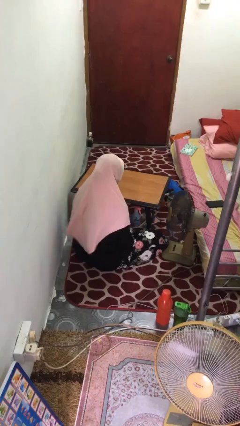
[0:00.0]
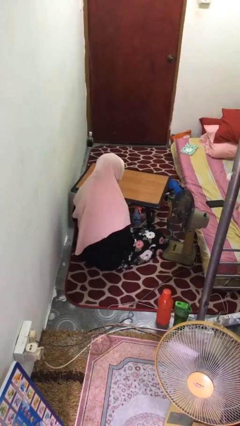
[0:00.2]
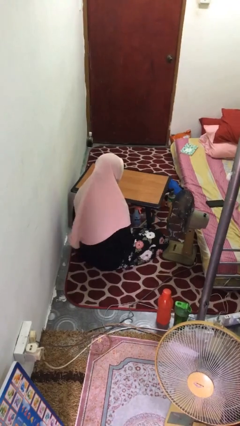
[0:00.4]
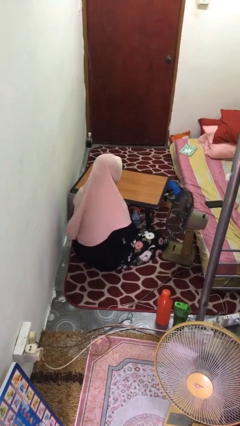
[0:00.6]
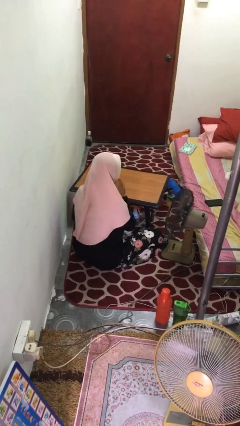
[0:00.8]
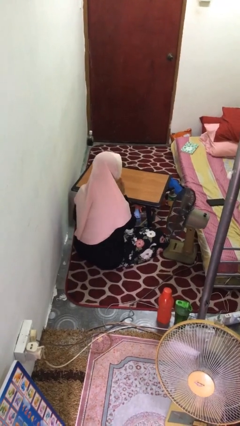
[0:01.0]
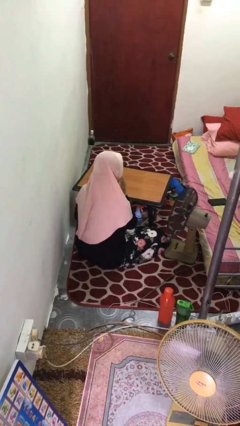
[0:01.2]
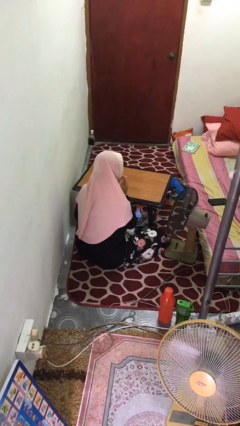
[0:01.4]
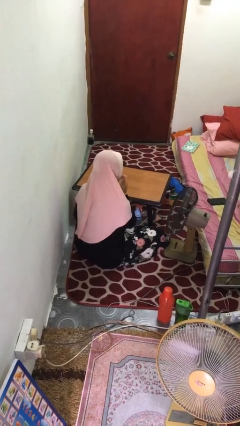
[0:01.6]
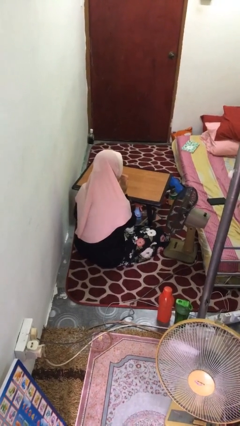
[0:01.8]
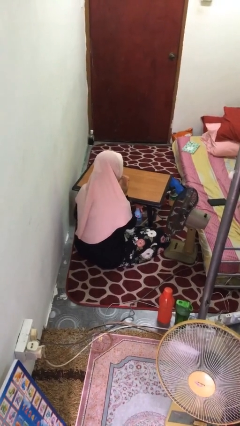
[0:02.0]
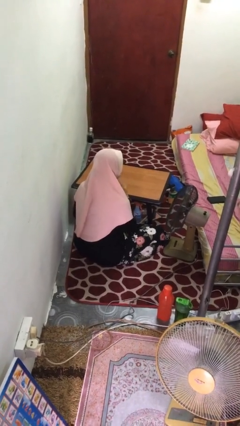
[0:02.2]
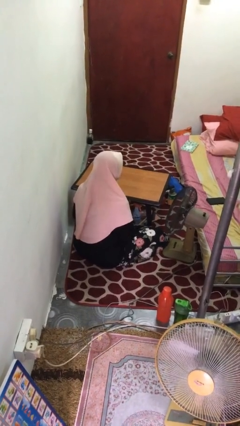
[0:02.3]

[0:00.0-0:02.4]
person licks fingers

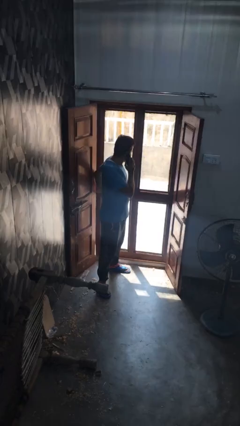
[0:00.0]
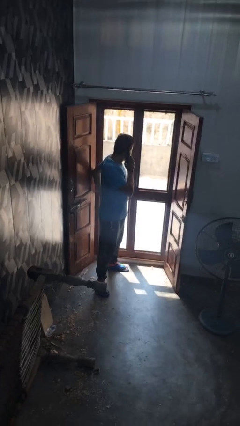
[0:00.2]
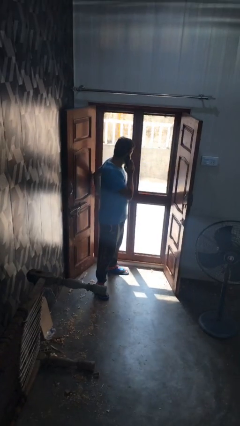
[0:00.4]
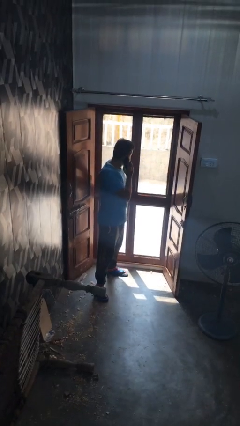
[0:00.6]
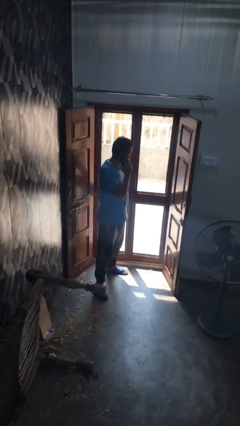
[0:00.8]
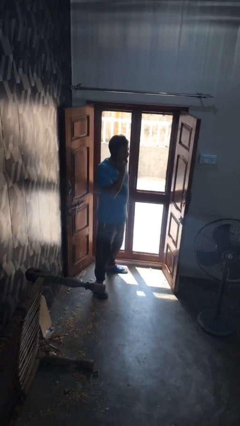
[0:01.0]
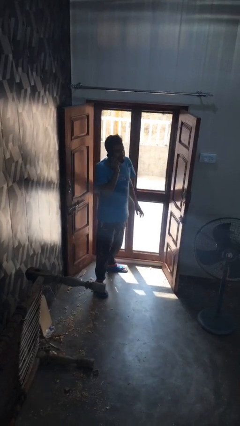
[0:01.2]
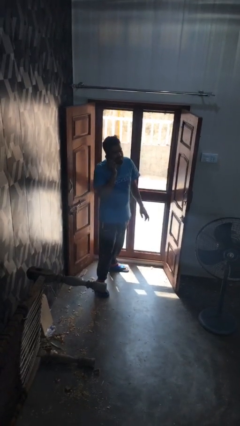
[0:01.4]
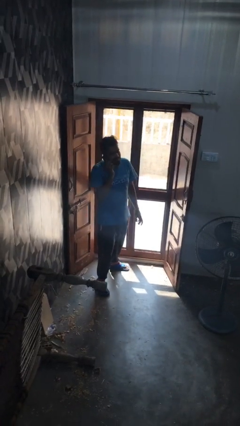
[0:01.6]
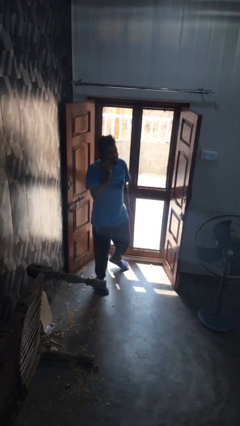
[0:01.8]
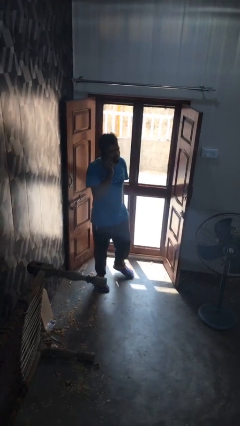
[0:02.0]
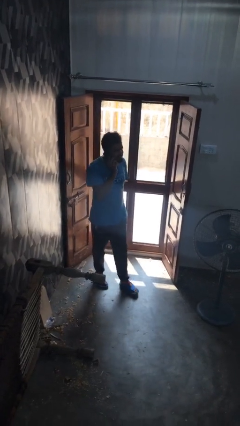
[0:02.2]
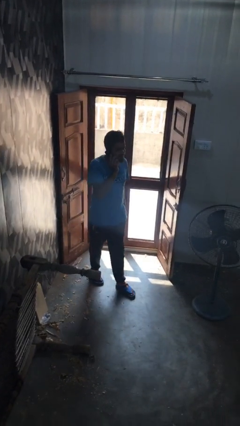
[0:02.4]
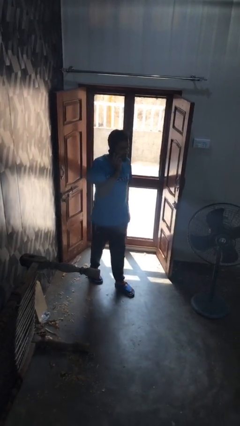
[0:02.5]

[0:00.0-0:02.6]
person closes facility door

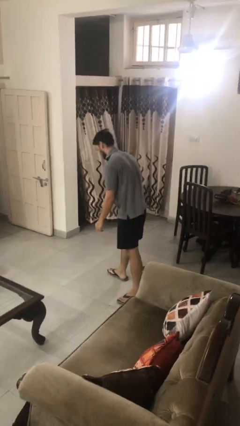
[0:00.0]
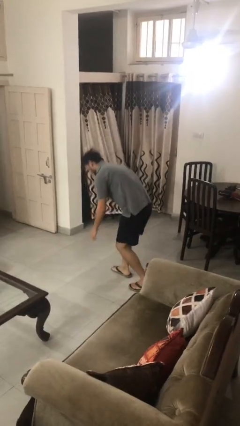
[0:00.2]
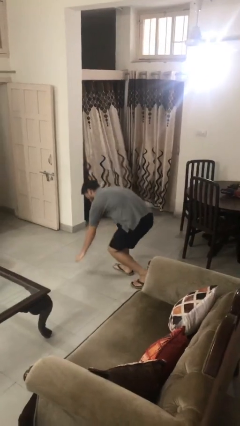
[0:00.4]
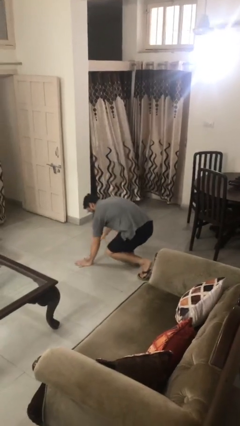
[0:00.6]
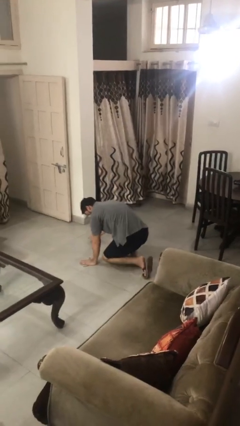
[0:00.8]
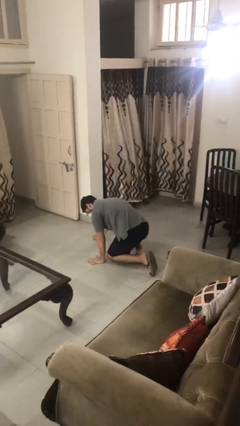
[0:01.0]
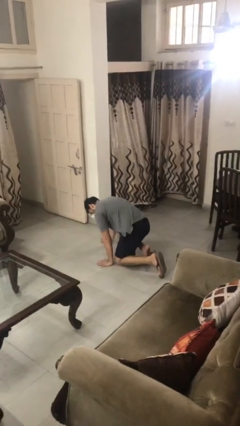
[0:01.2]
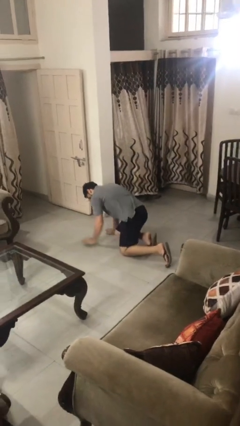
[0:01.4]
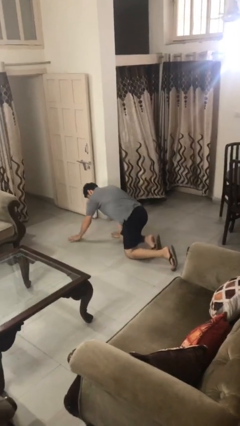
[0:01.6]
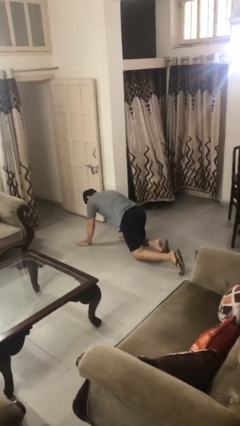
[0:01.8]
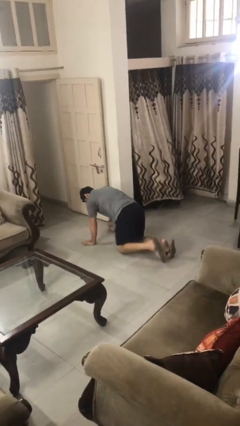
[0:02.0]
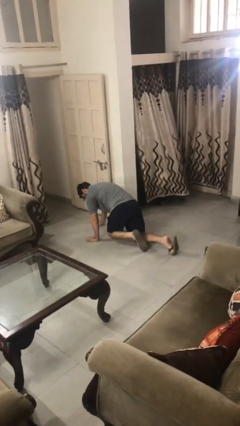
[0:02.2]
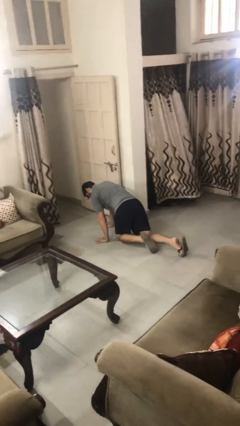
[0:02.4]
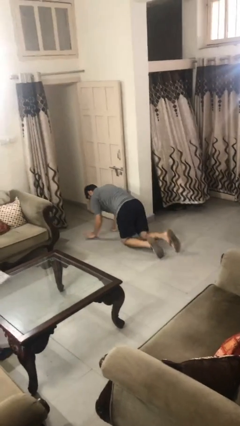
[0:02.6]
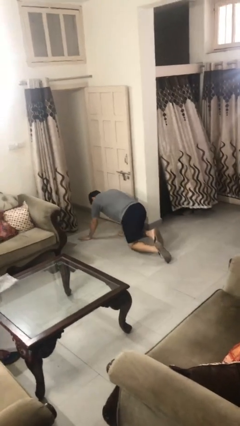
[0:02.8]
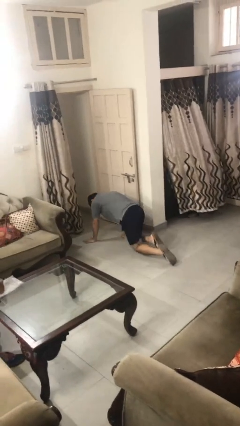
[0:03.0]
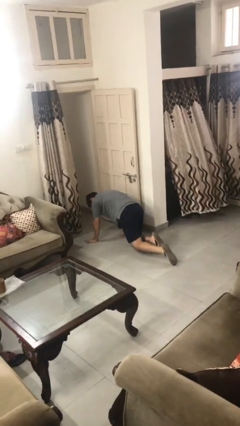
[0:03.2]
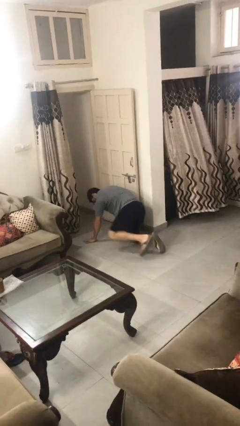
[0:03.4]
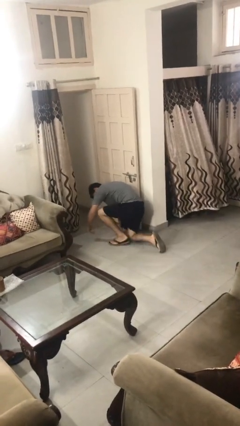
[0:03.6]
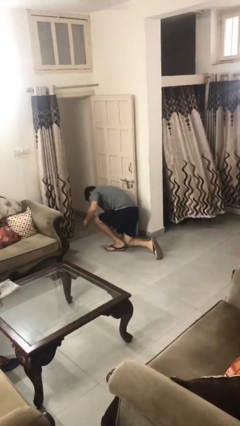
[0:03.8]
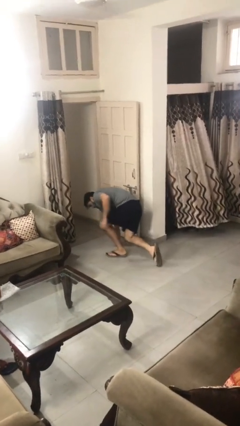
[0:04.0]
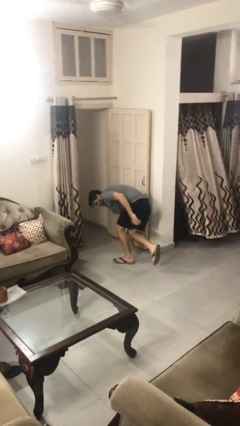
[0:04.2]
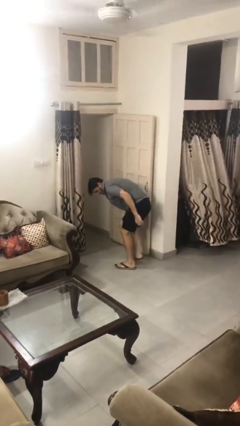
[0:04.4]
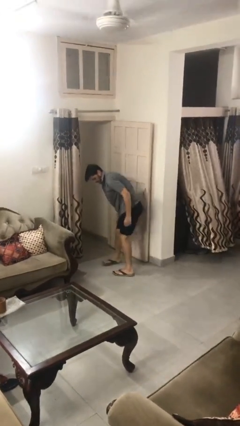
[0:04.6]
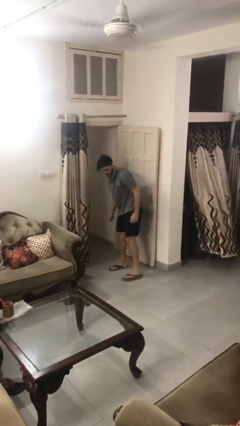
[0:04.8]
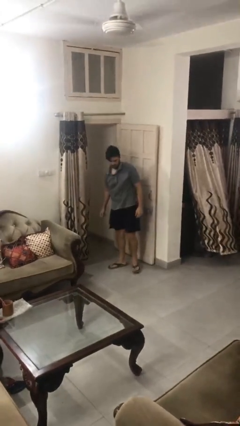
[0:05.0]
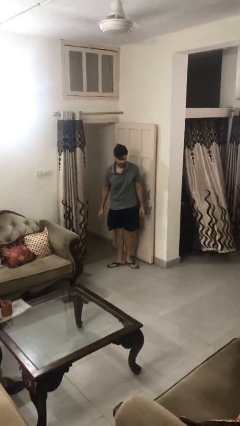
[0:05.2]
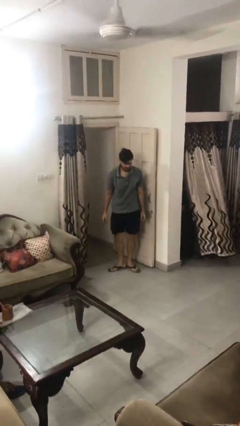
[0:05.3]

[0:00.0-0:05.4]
person crawls

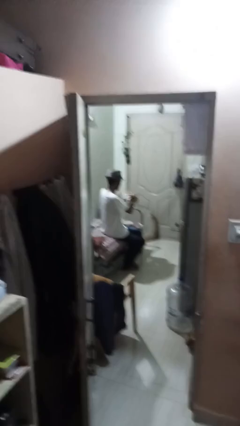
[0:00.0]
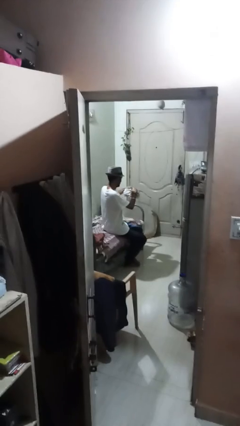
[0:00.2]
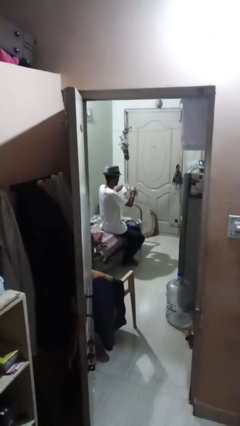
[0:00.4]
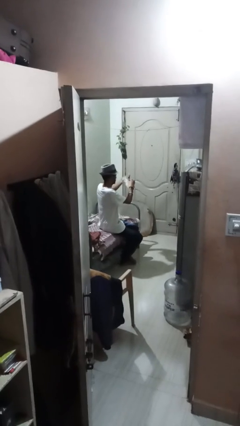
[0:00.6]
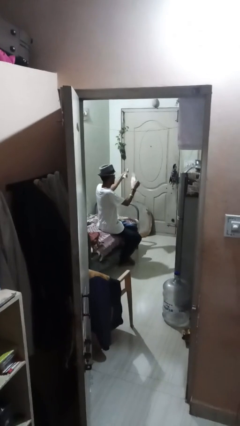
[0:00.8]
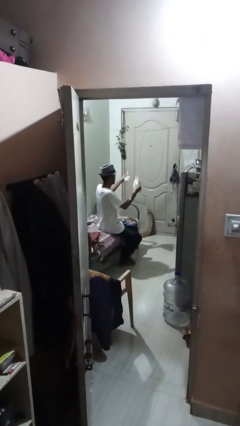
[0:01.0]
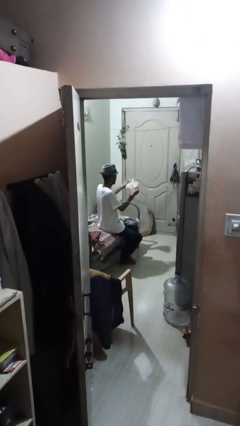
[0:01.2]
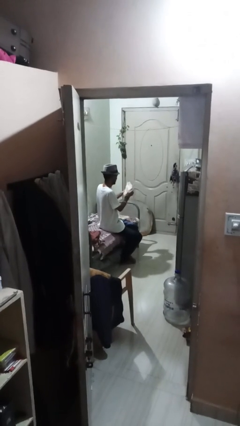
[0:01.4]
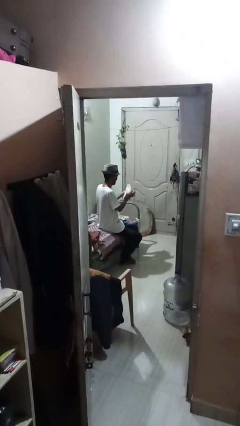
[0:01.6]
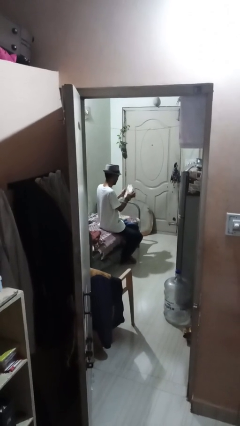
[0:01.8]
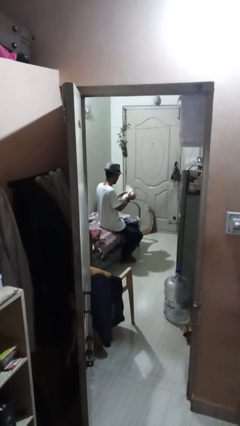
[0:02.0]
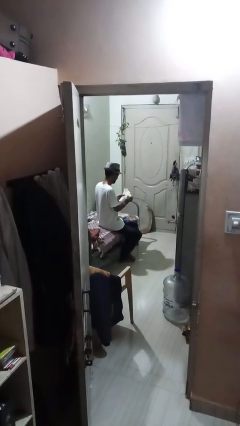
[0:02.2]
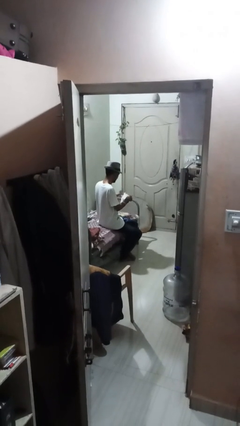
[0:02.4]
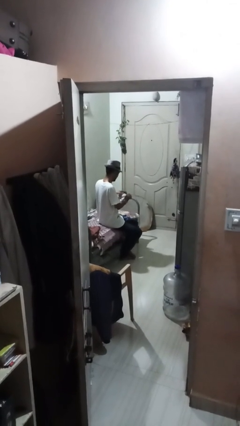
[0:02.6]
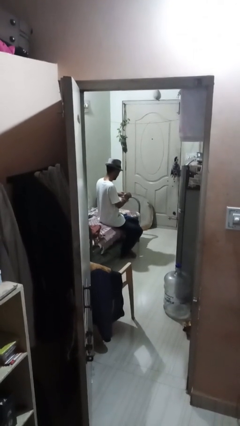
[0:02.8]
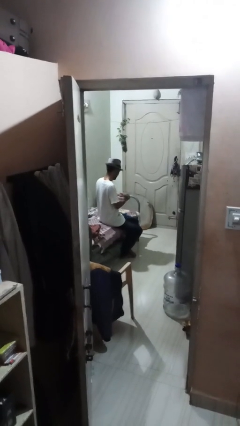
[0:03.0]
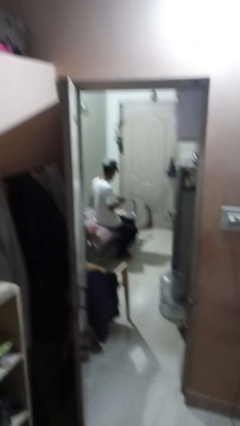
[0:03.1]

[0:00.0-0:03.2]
person tears paper

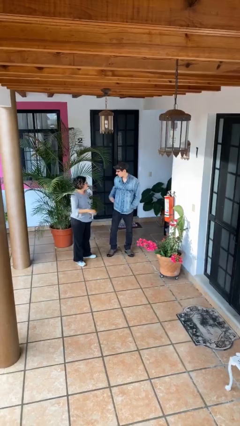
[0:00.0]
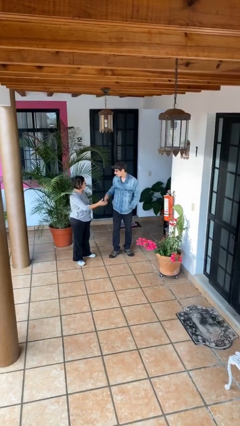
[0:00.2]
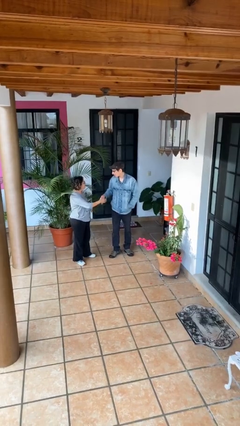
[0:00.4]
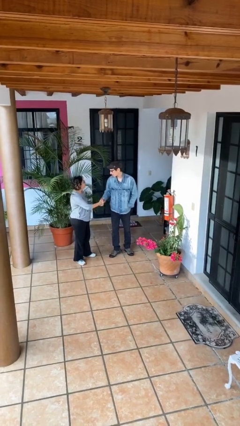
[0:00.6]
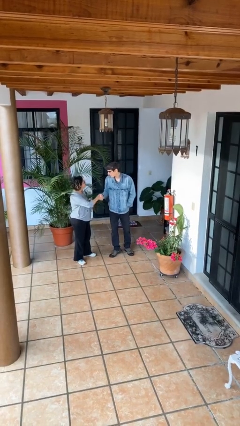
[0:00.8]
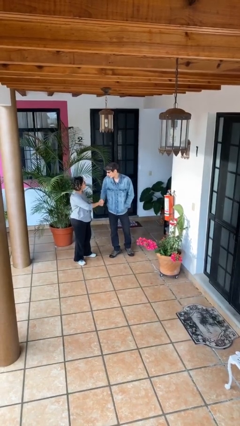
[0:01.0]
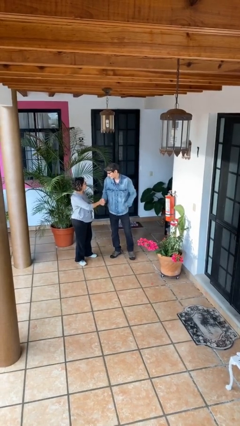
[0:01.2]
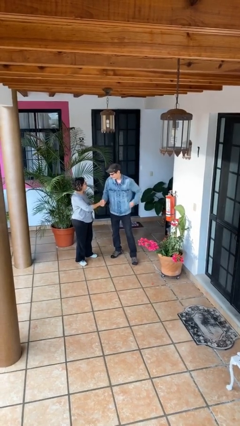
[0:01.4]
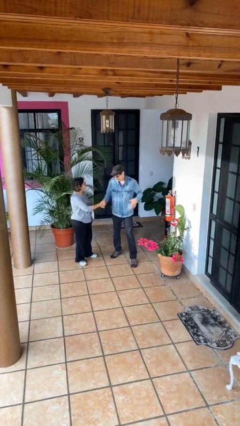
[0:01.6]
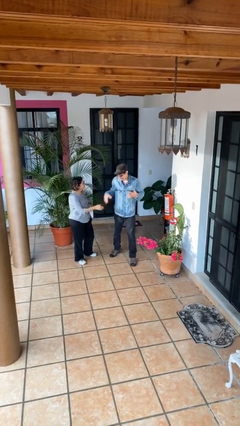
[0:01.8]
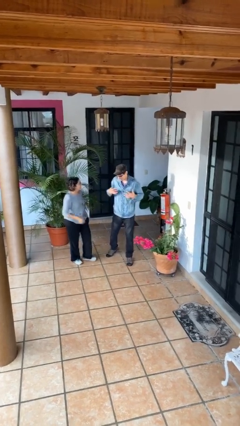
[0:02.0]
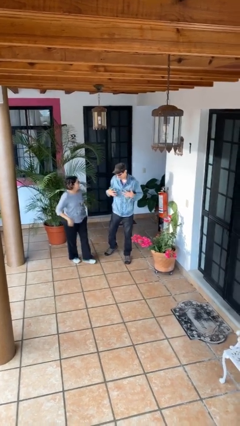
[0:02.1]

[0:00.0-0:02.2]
person shakes hand

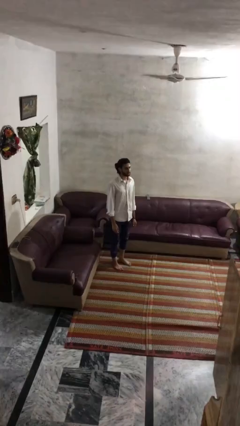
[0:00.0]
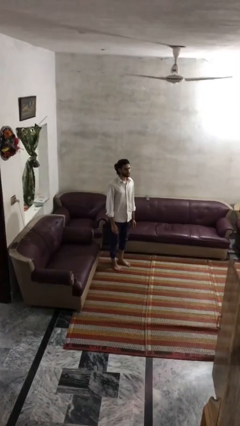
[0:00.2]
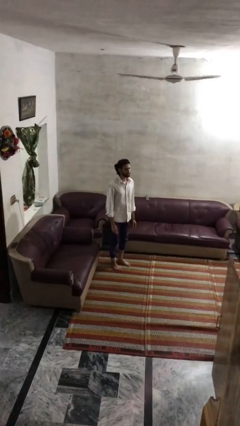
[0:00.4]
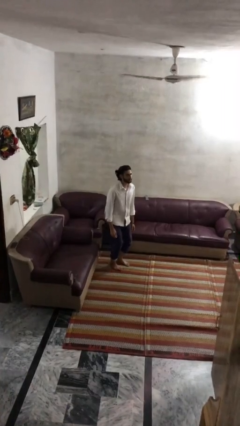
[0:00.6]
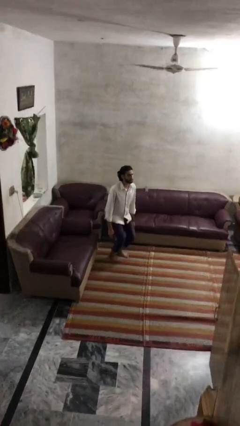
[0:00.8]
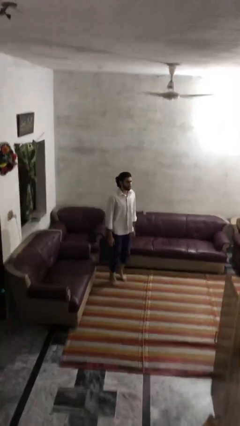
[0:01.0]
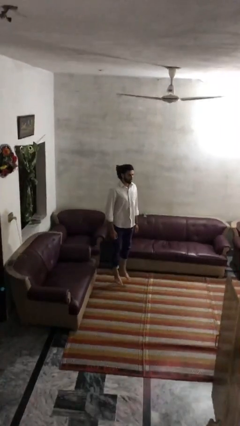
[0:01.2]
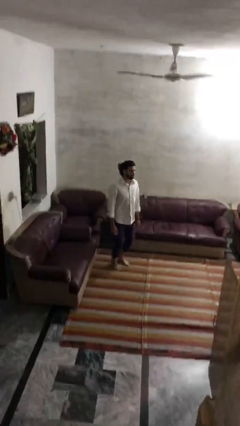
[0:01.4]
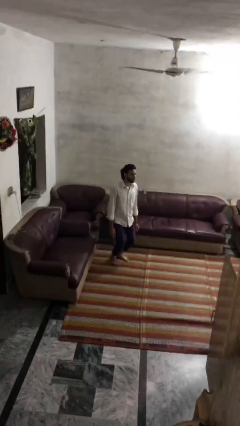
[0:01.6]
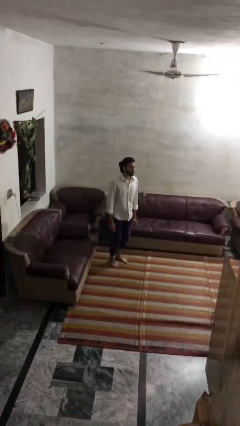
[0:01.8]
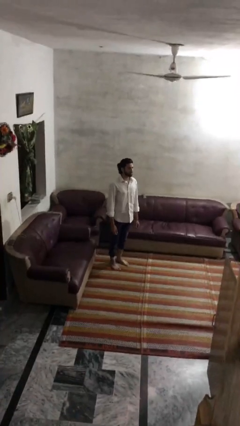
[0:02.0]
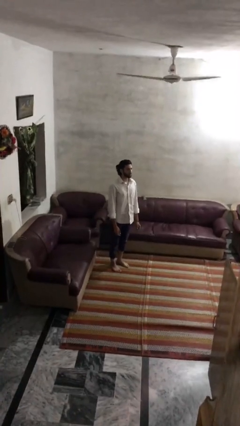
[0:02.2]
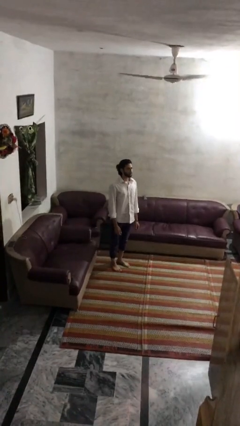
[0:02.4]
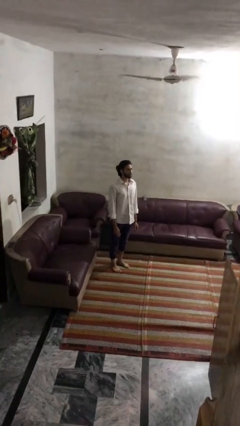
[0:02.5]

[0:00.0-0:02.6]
person jumps
